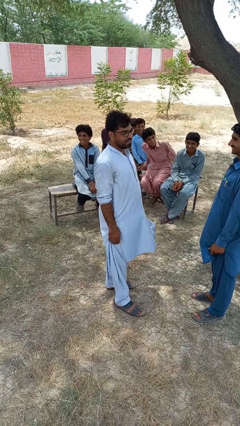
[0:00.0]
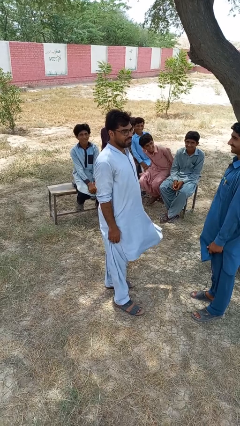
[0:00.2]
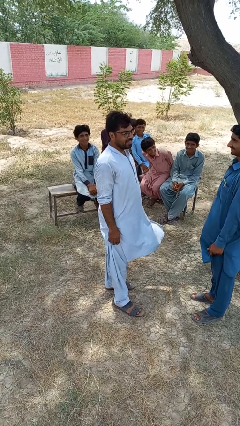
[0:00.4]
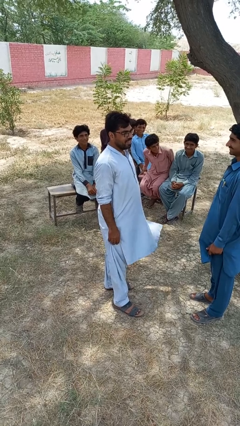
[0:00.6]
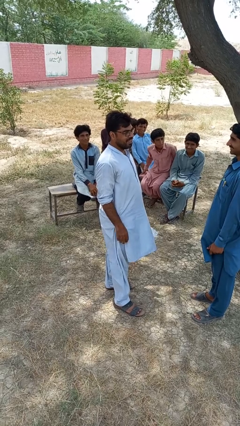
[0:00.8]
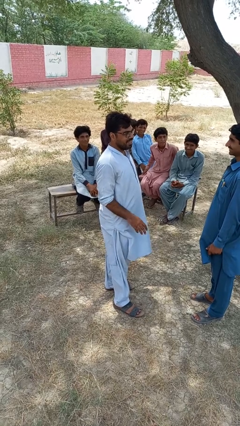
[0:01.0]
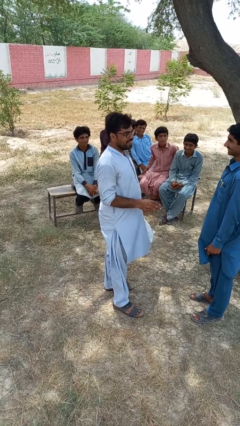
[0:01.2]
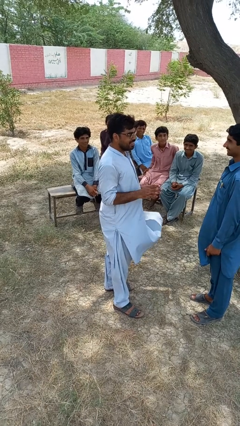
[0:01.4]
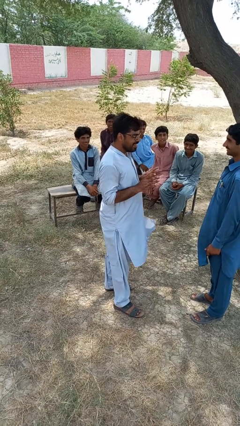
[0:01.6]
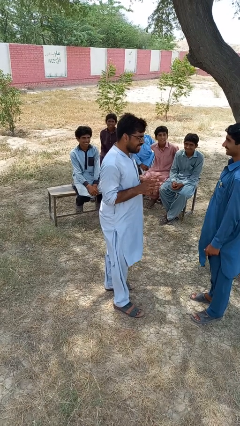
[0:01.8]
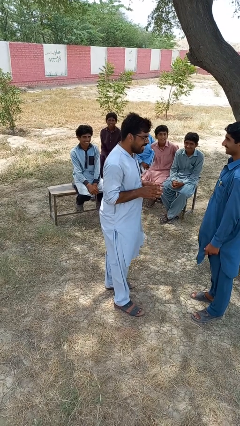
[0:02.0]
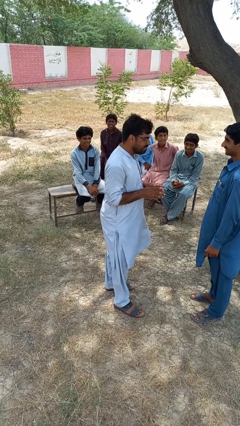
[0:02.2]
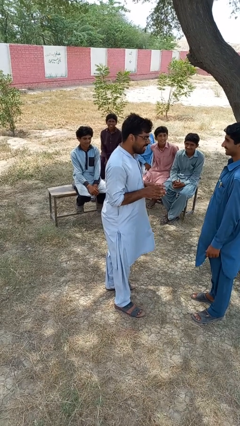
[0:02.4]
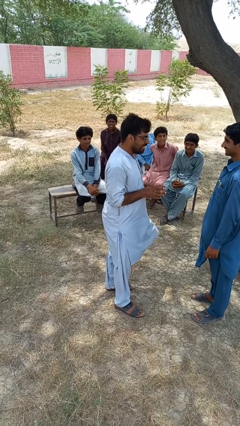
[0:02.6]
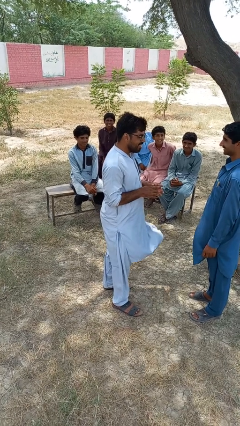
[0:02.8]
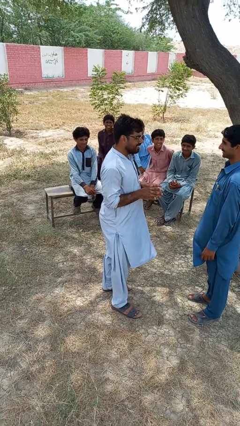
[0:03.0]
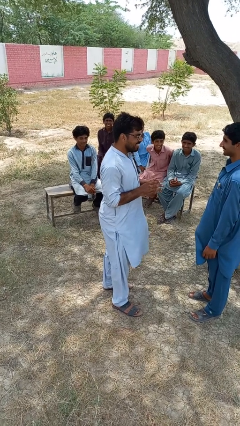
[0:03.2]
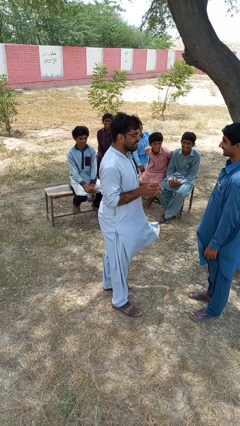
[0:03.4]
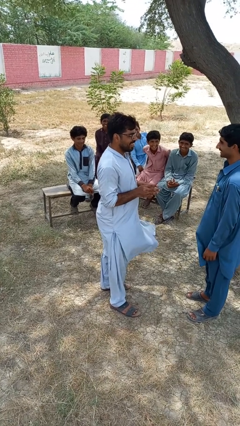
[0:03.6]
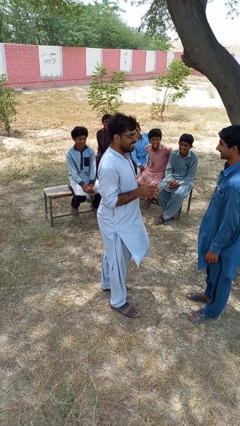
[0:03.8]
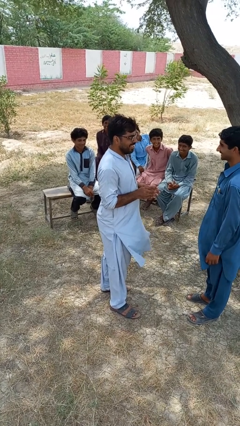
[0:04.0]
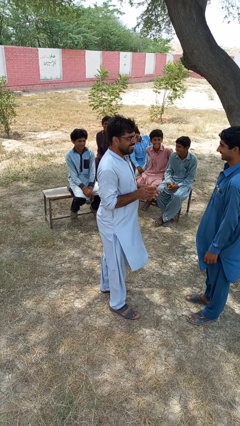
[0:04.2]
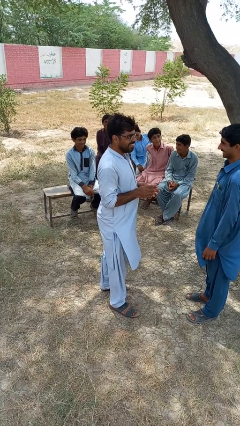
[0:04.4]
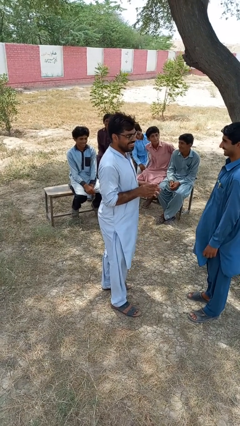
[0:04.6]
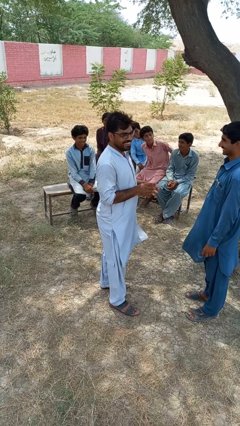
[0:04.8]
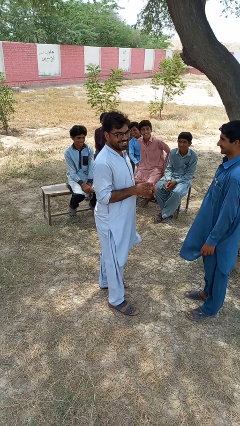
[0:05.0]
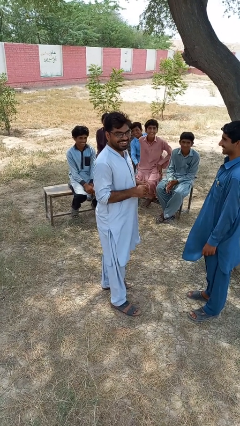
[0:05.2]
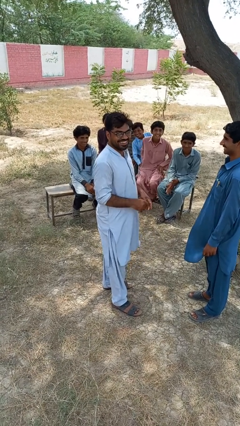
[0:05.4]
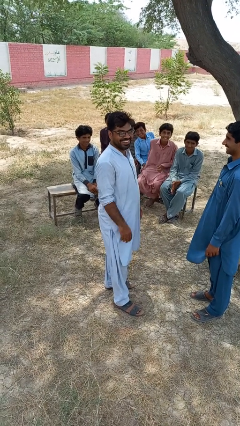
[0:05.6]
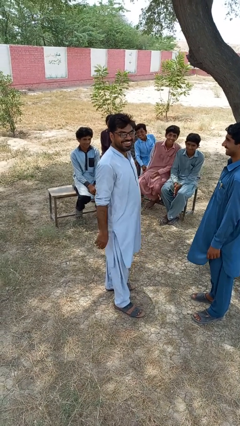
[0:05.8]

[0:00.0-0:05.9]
person talks to person

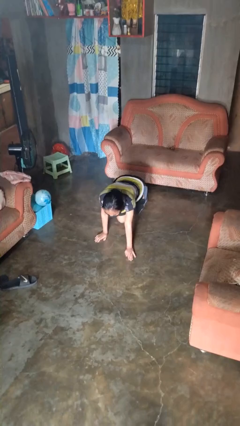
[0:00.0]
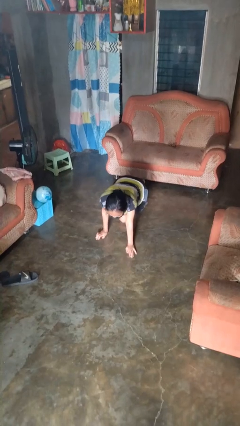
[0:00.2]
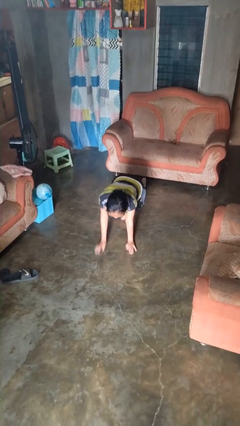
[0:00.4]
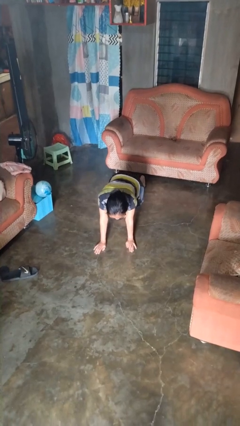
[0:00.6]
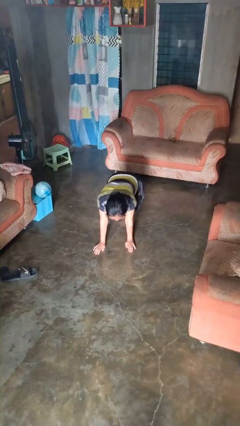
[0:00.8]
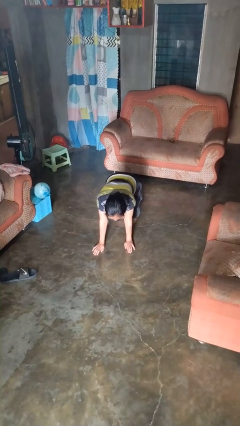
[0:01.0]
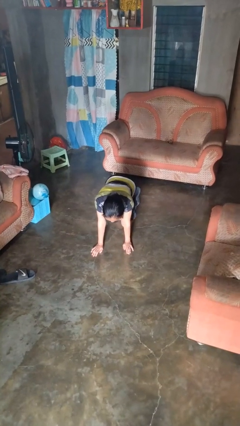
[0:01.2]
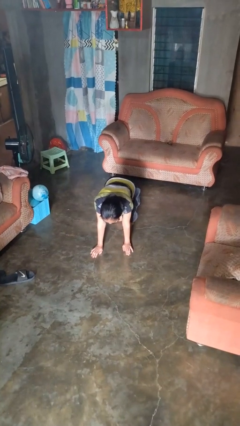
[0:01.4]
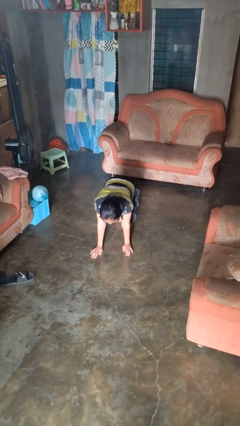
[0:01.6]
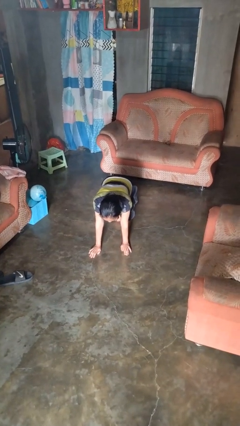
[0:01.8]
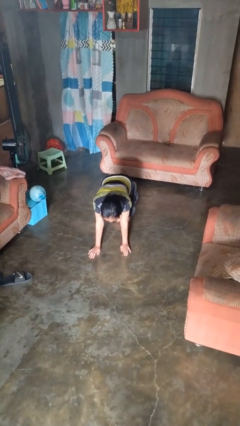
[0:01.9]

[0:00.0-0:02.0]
person crawls

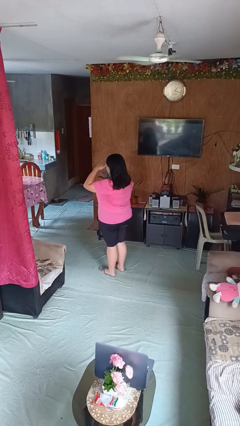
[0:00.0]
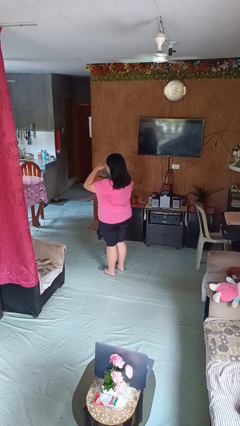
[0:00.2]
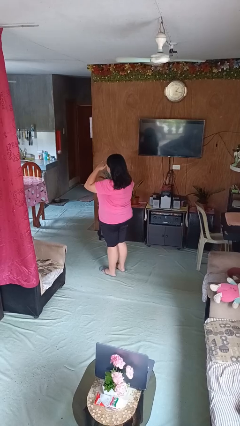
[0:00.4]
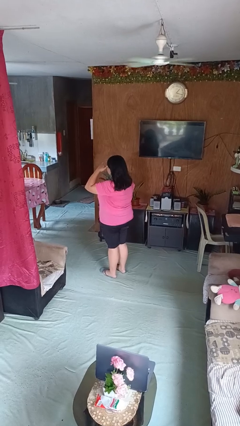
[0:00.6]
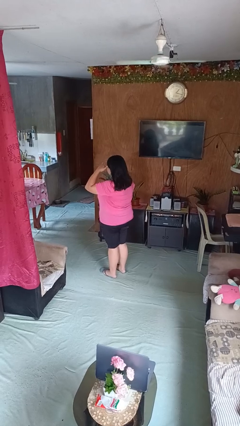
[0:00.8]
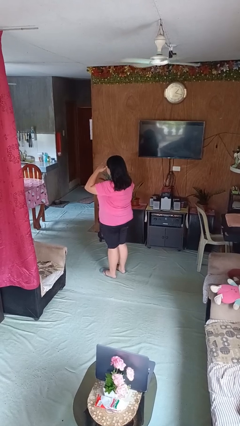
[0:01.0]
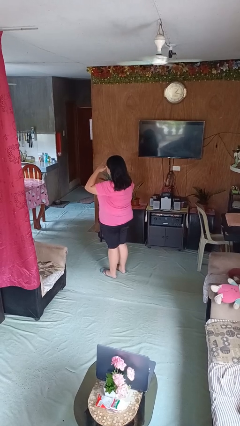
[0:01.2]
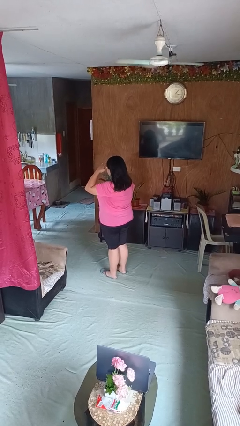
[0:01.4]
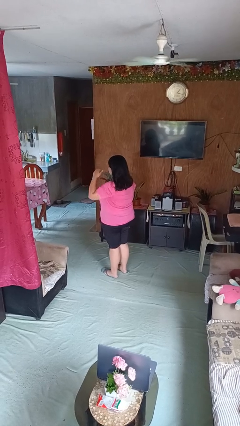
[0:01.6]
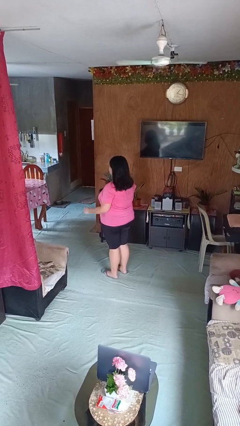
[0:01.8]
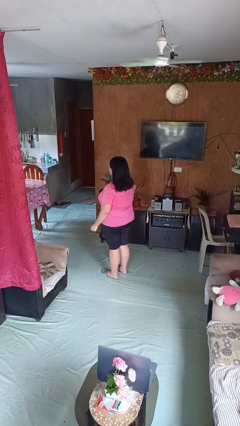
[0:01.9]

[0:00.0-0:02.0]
person salutes

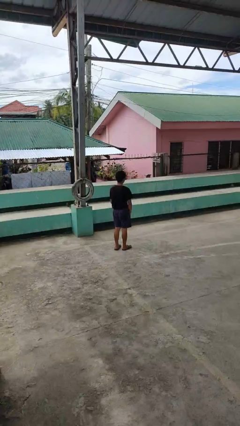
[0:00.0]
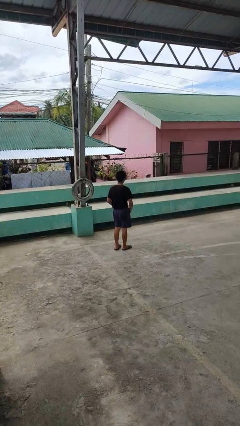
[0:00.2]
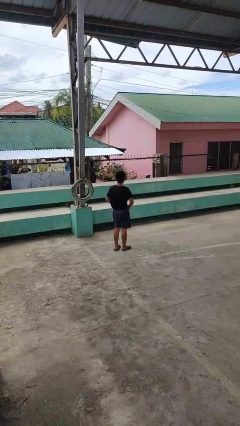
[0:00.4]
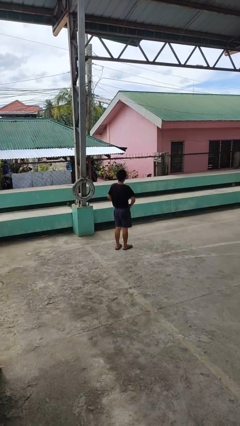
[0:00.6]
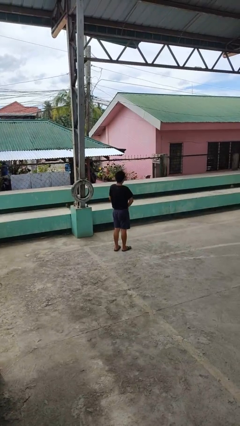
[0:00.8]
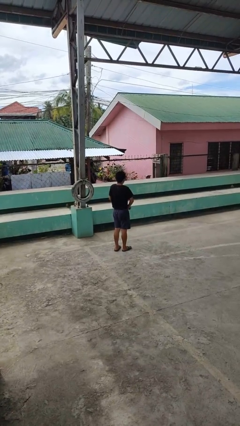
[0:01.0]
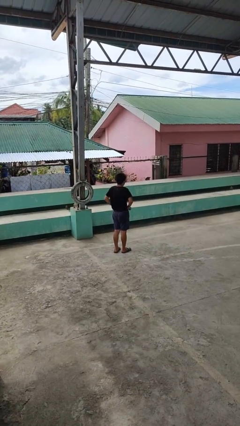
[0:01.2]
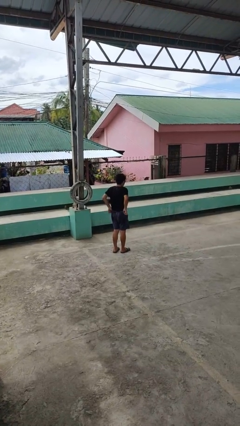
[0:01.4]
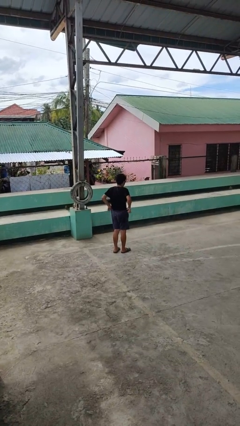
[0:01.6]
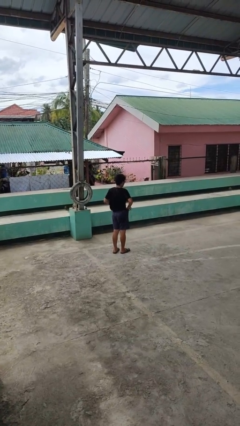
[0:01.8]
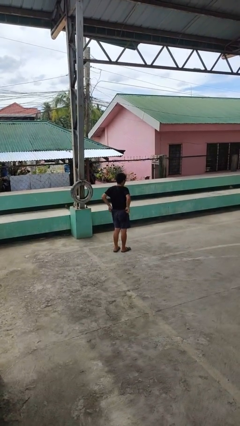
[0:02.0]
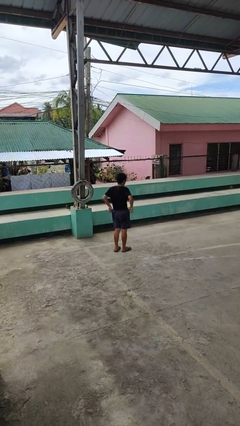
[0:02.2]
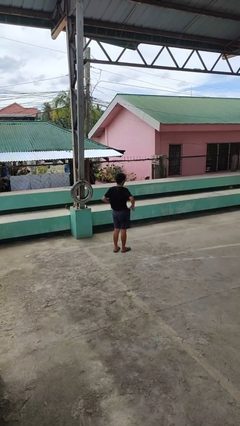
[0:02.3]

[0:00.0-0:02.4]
person hikes up pants

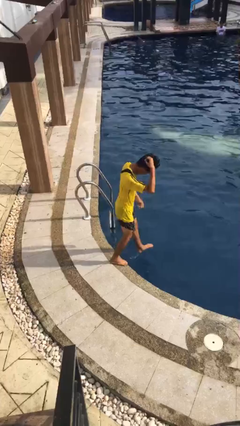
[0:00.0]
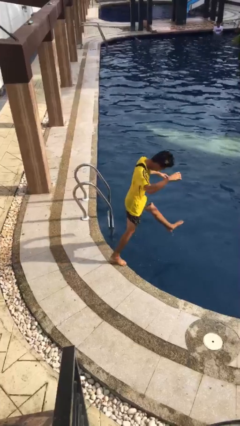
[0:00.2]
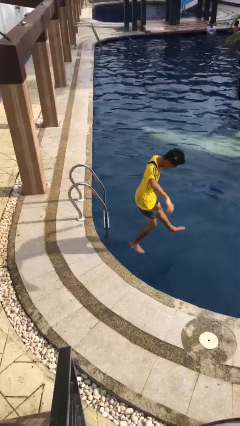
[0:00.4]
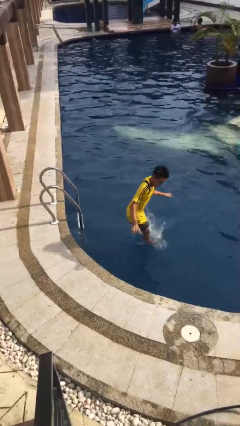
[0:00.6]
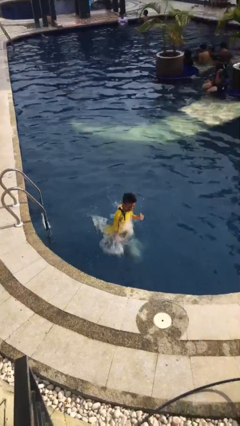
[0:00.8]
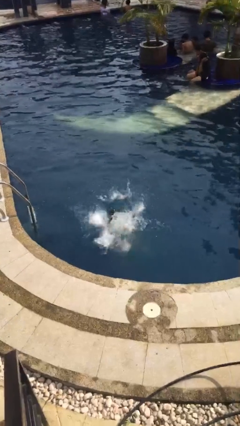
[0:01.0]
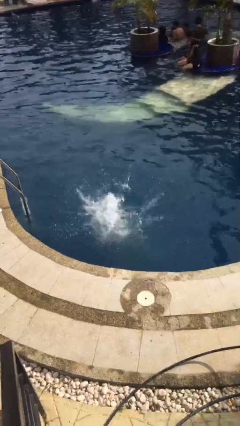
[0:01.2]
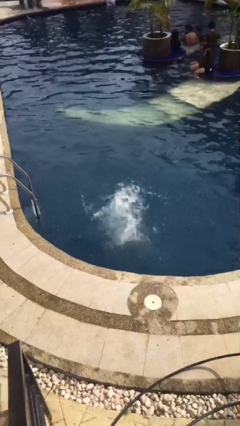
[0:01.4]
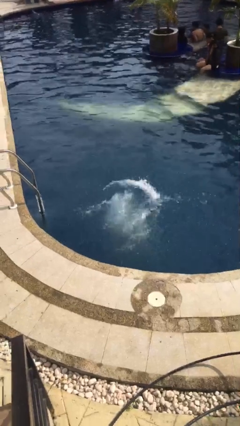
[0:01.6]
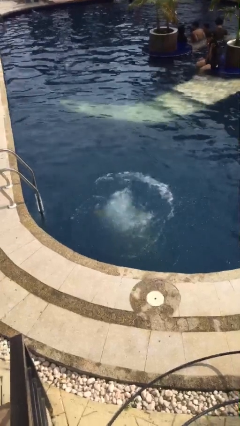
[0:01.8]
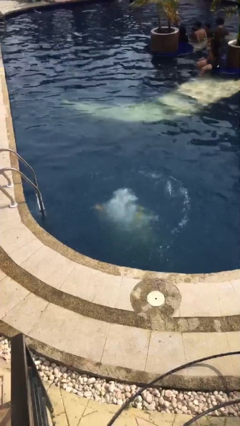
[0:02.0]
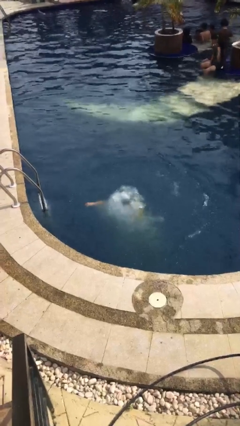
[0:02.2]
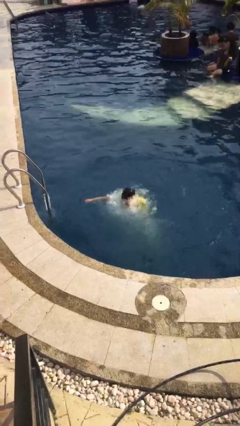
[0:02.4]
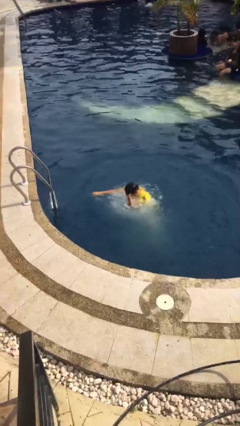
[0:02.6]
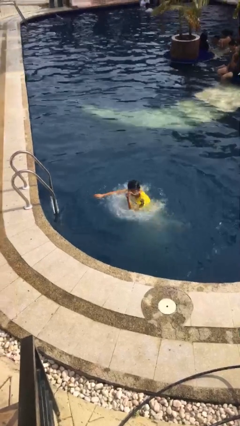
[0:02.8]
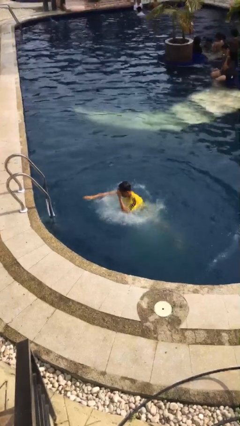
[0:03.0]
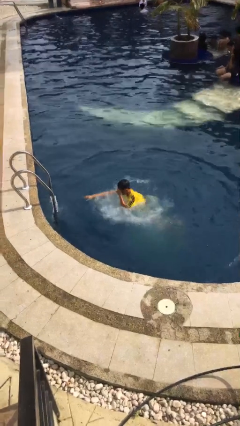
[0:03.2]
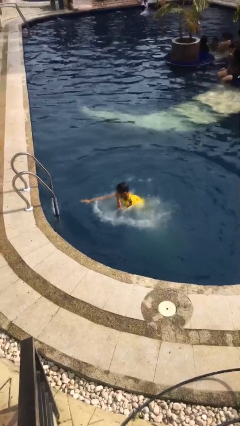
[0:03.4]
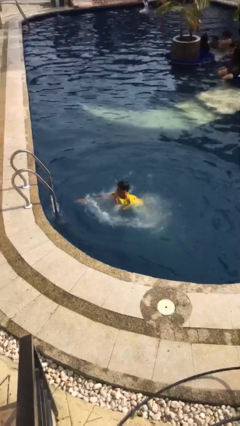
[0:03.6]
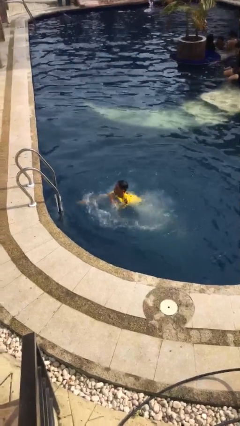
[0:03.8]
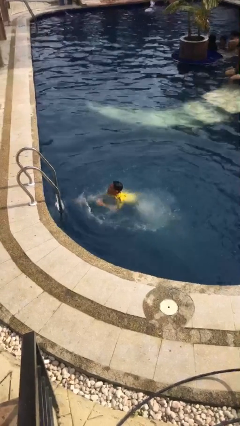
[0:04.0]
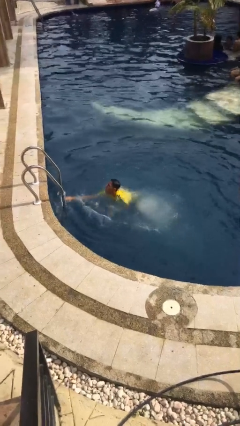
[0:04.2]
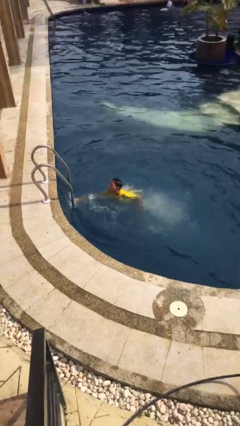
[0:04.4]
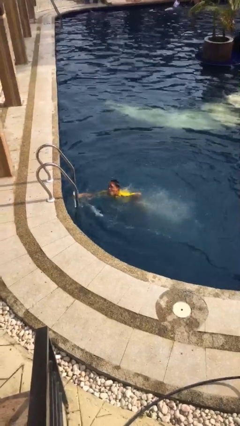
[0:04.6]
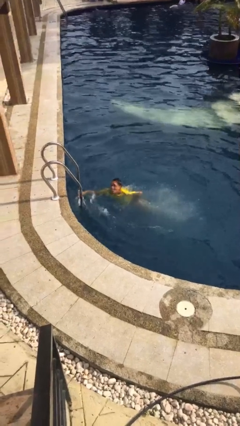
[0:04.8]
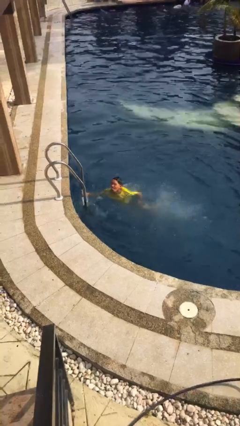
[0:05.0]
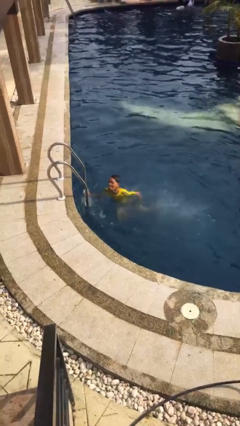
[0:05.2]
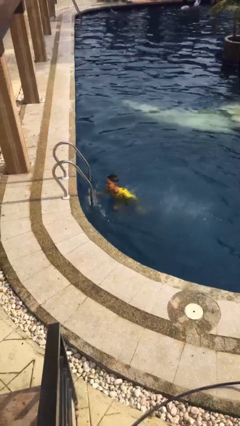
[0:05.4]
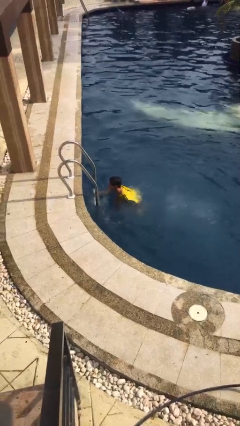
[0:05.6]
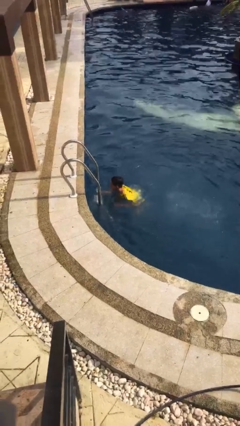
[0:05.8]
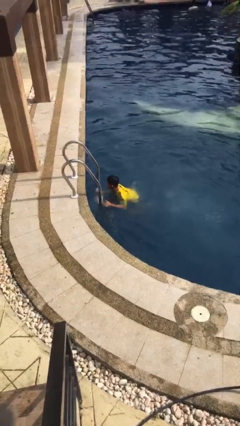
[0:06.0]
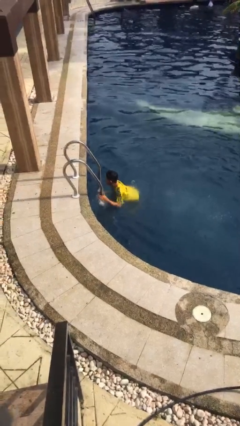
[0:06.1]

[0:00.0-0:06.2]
person jumps into pool
